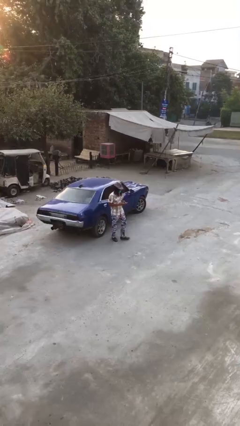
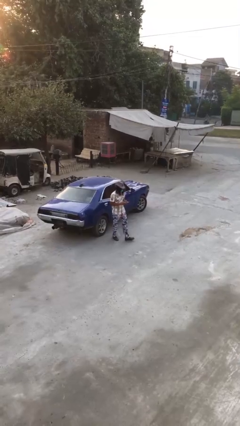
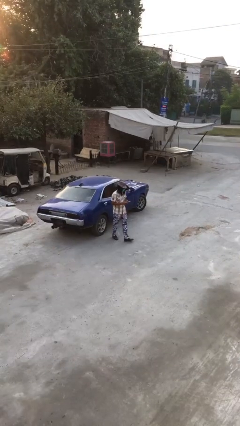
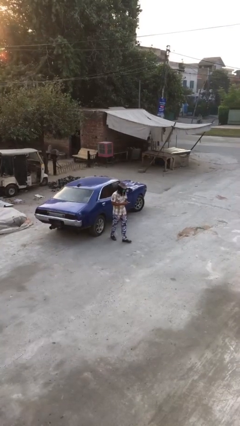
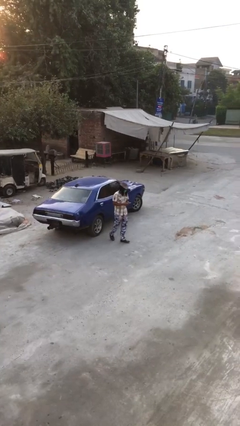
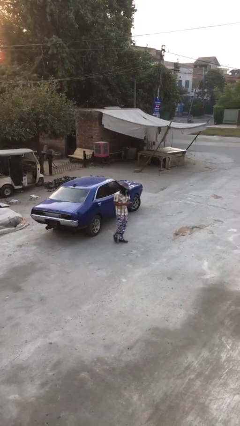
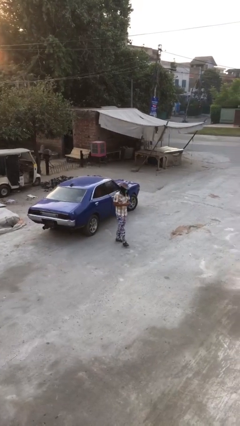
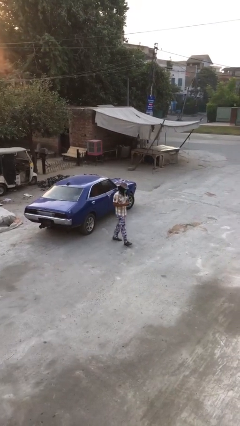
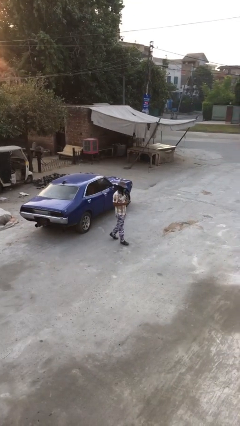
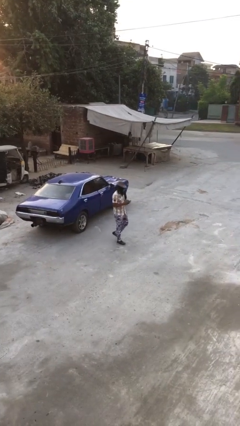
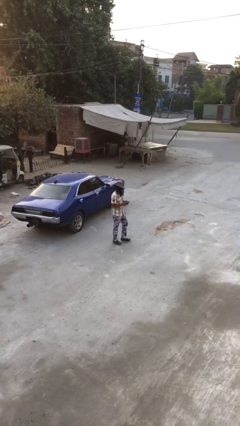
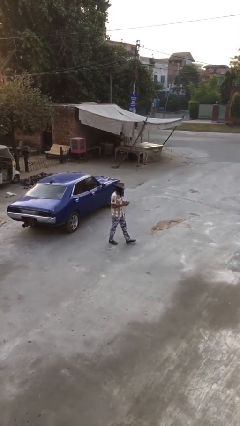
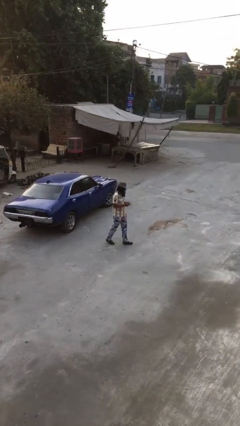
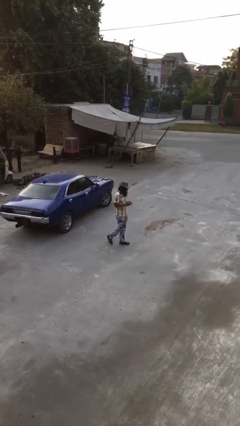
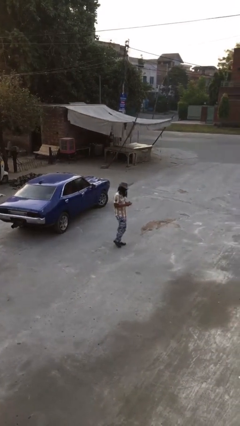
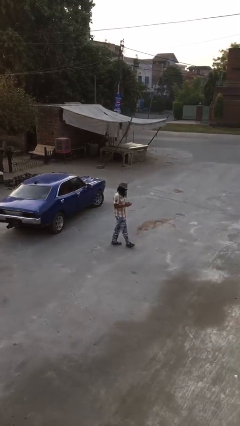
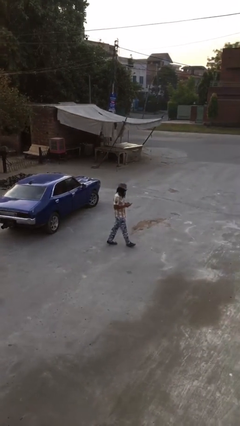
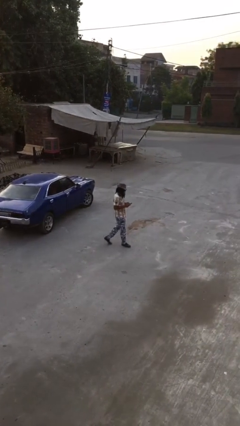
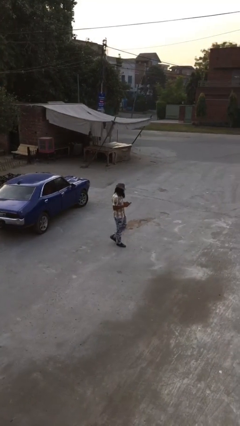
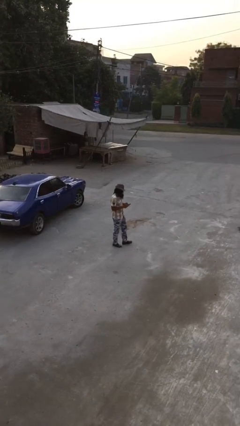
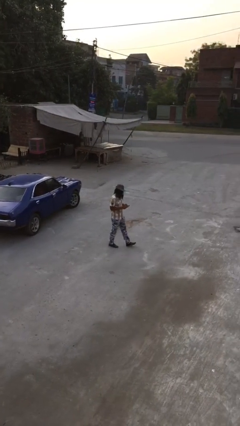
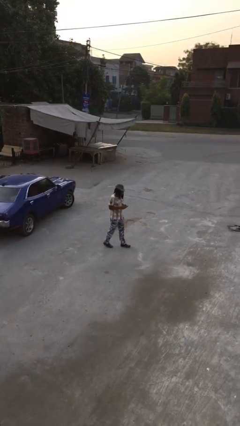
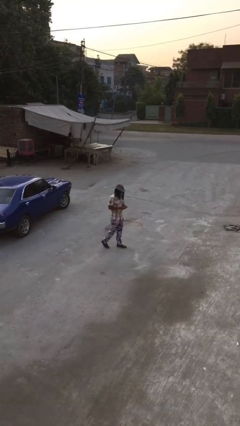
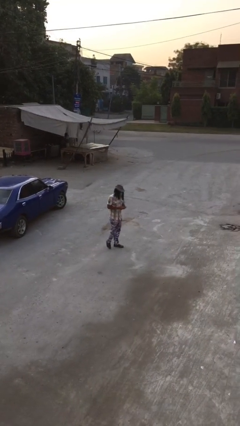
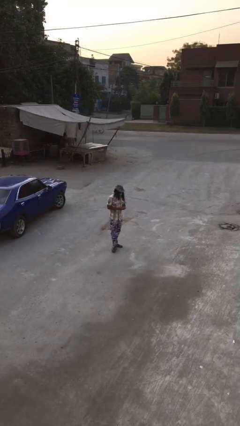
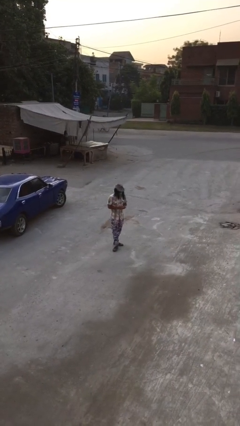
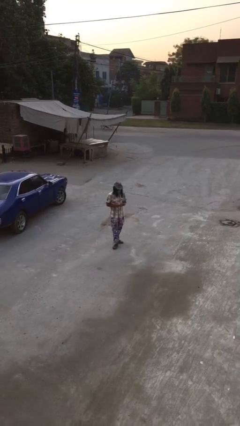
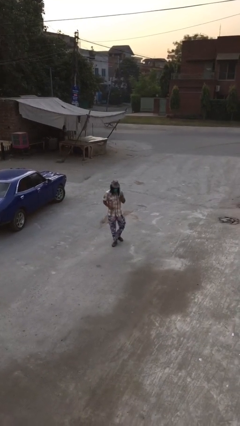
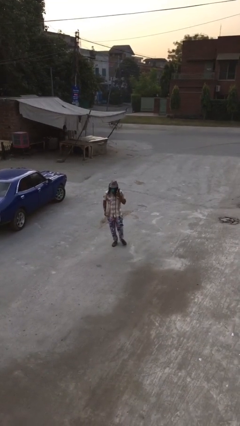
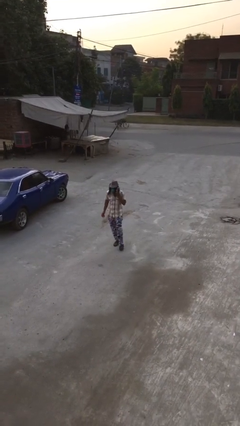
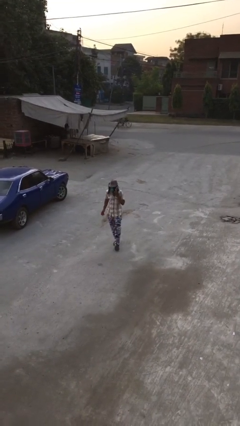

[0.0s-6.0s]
person texts on phone

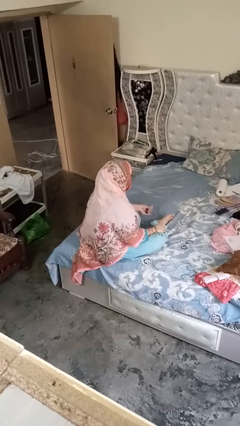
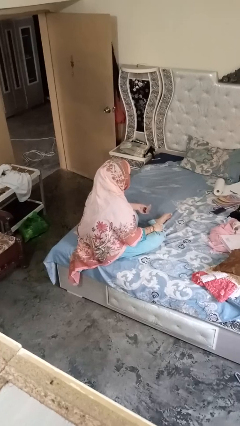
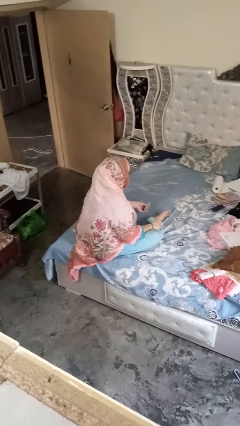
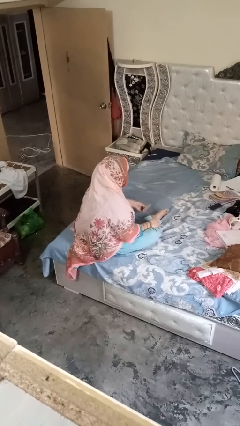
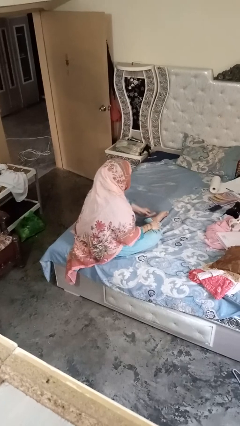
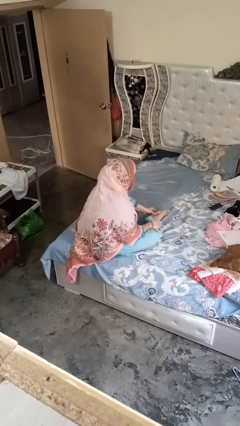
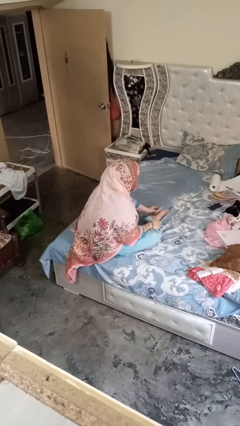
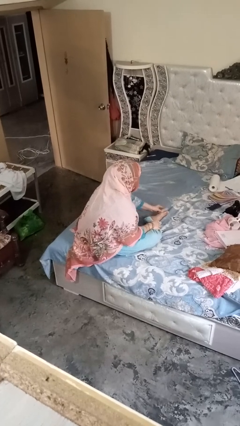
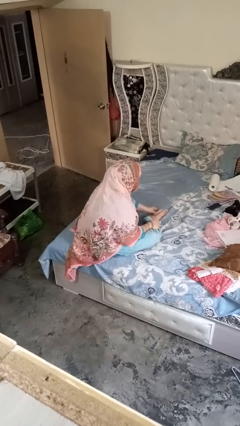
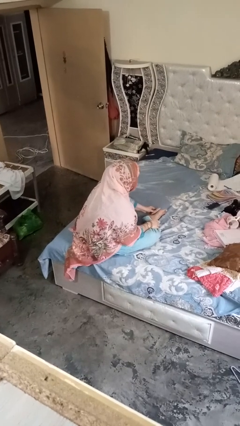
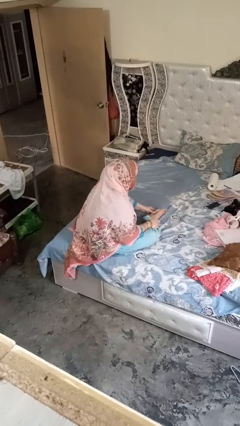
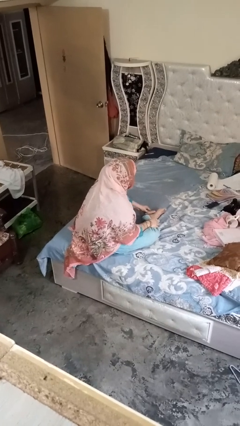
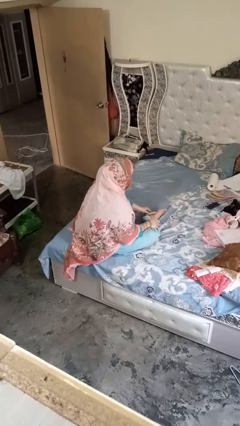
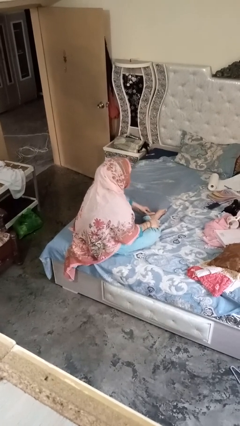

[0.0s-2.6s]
person rubs foot

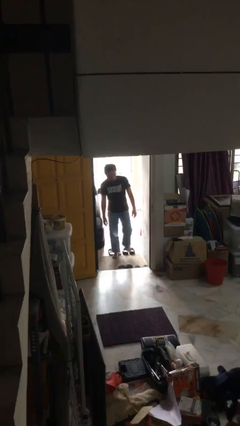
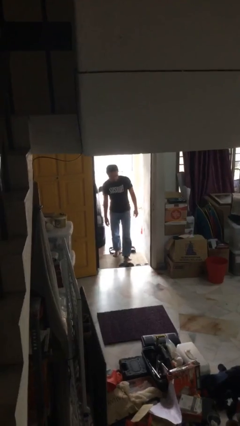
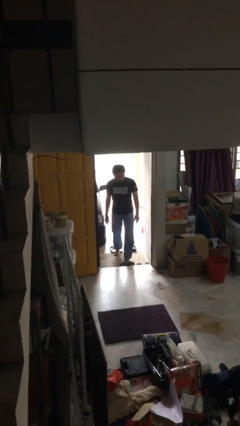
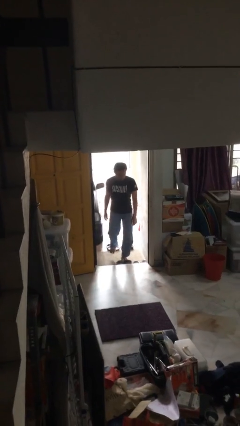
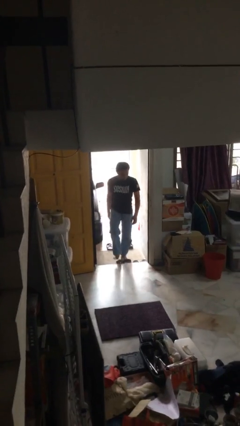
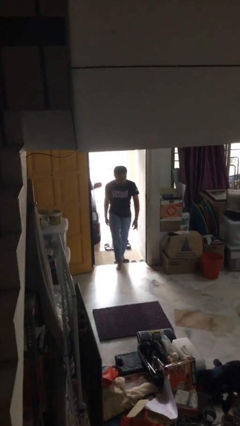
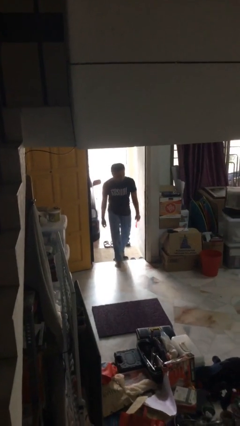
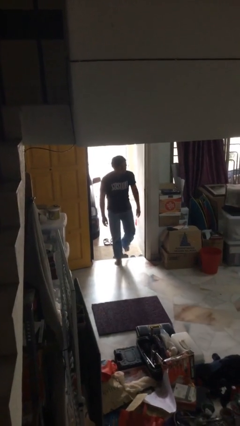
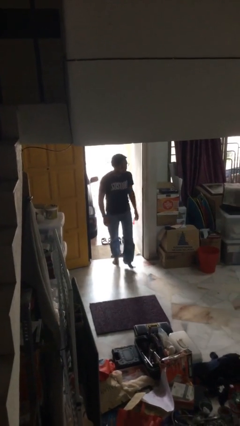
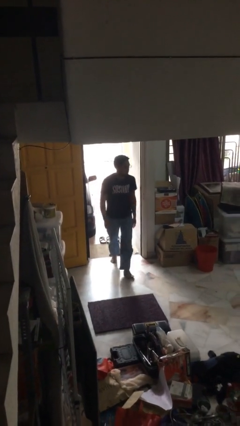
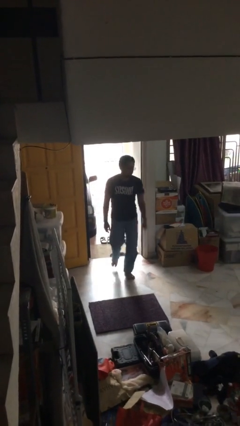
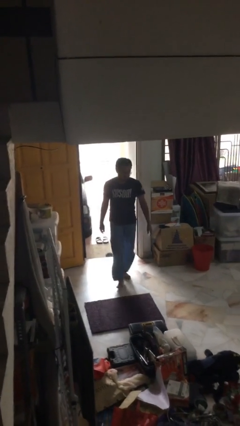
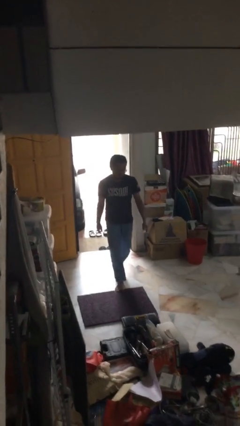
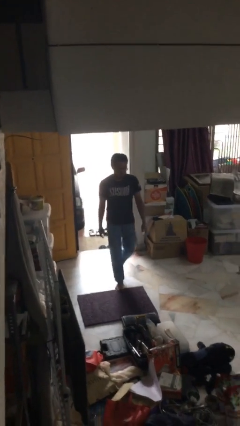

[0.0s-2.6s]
person enters scene through structure

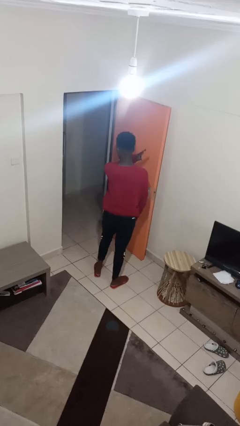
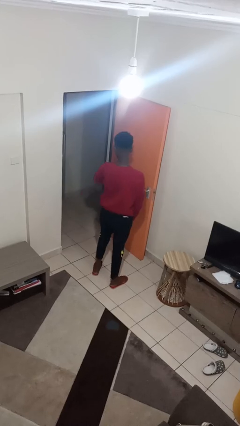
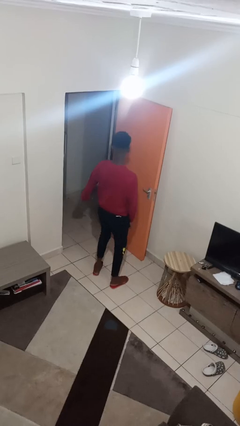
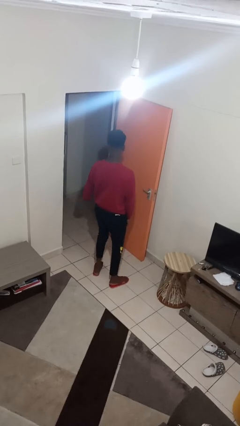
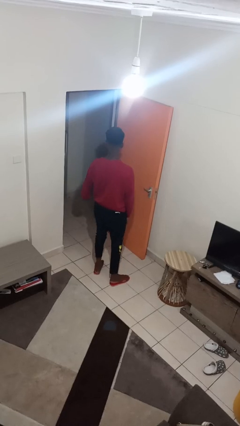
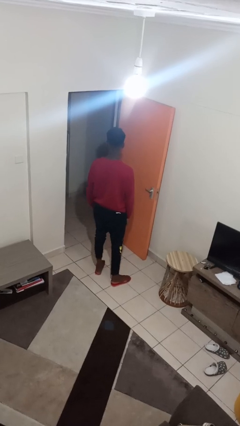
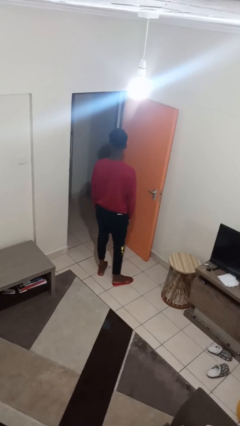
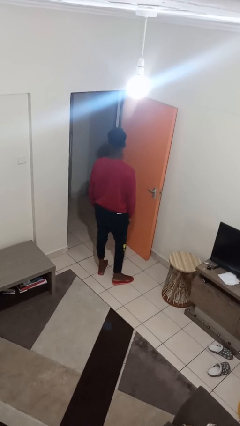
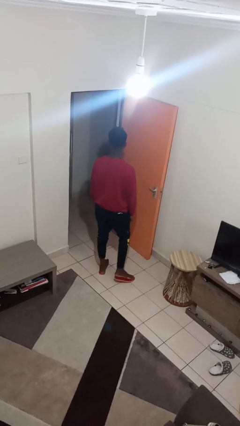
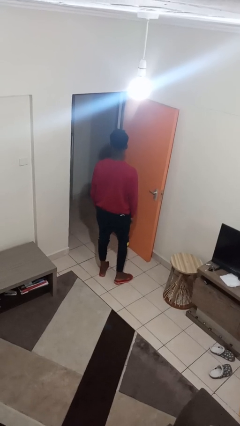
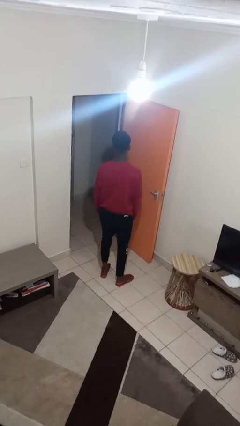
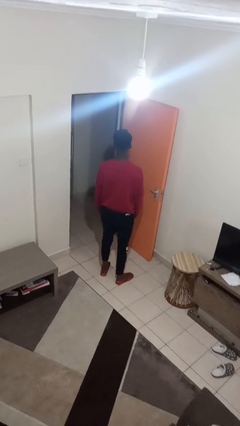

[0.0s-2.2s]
person karate chop

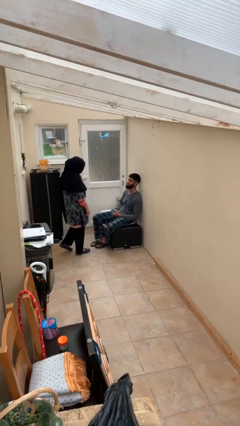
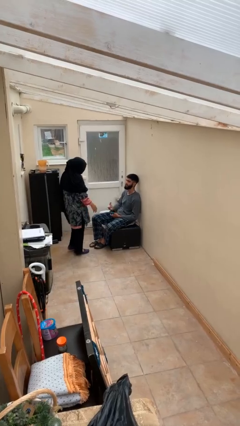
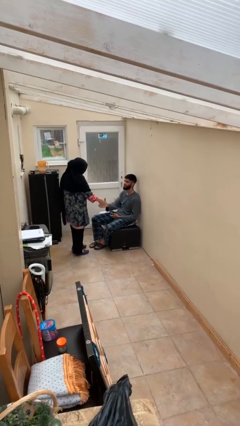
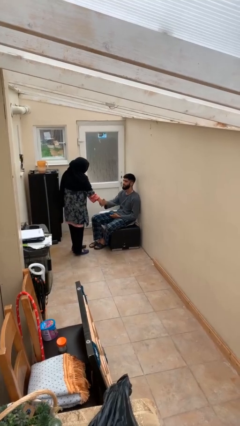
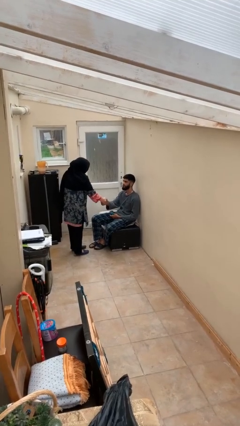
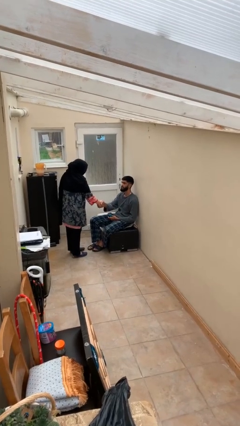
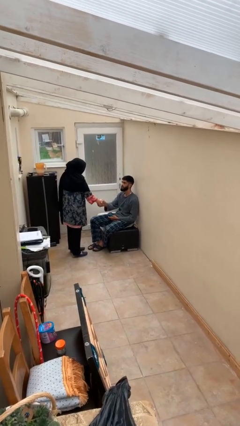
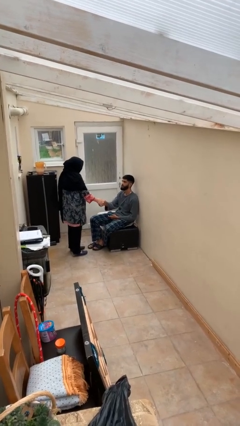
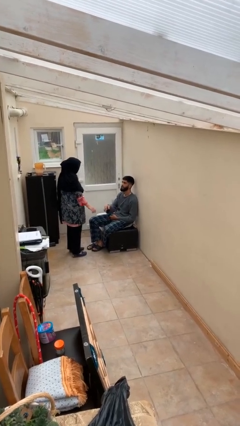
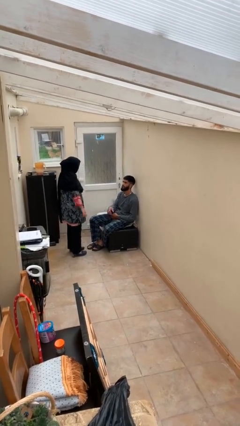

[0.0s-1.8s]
person shakes hand

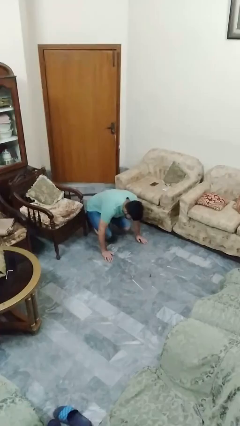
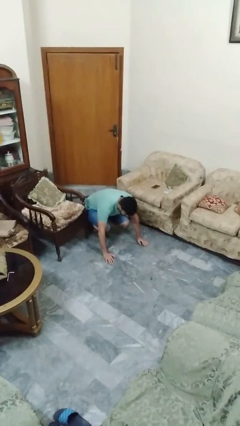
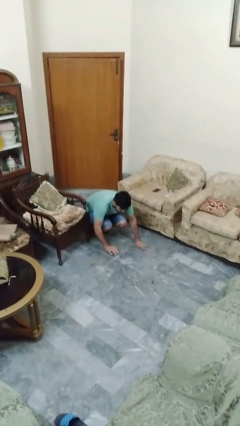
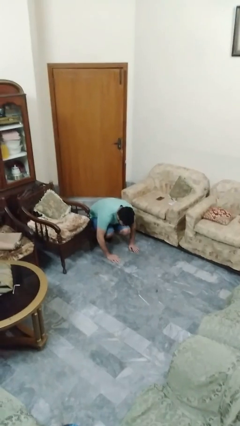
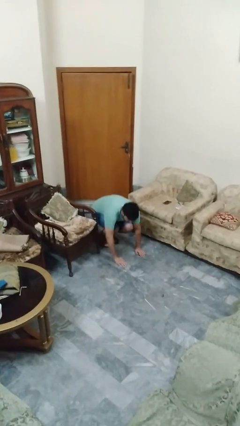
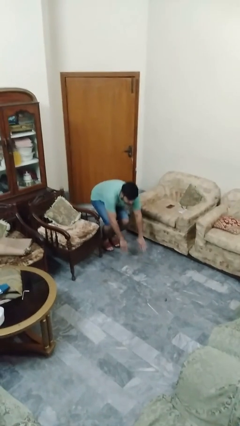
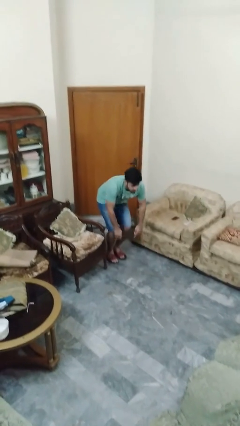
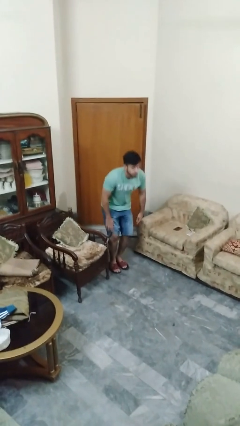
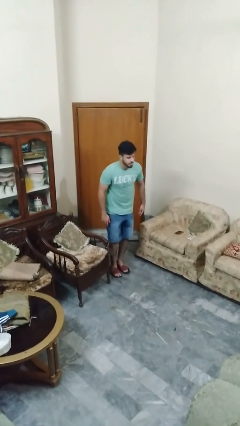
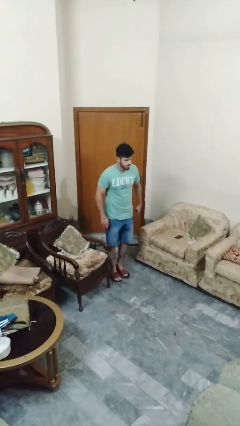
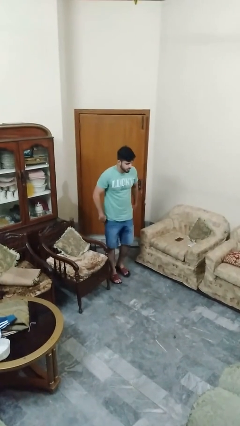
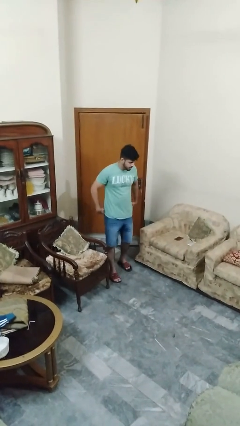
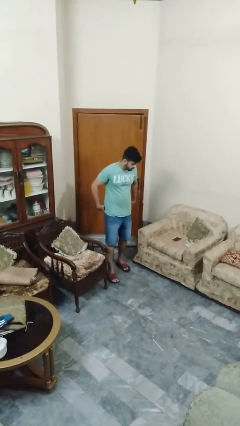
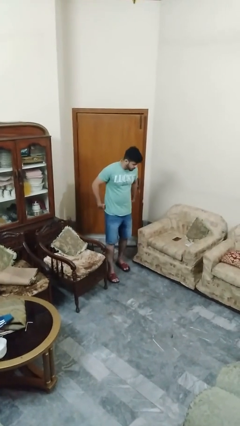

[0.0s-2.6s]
person stands up from floor
